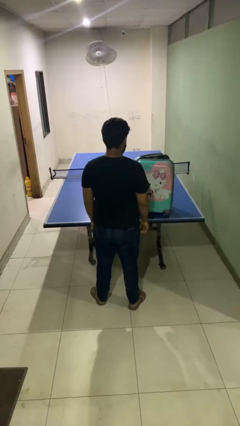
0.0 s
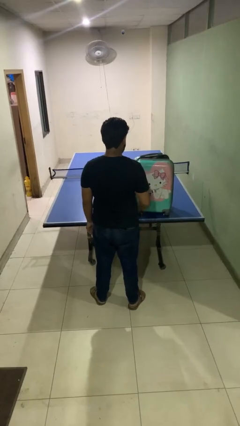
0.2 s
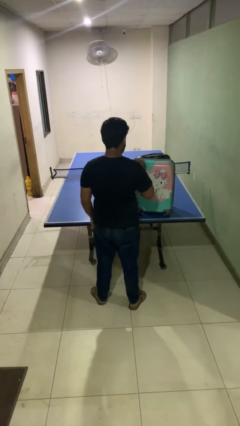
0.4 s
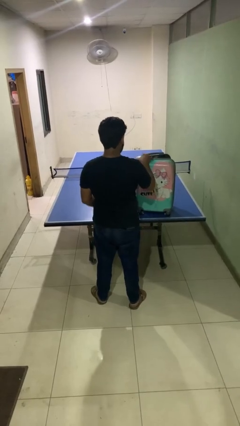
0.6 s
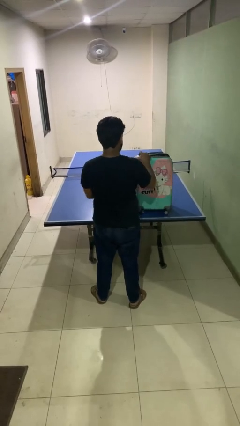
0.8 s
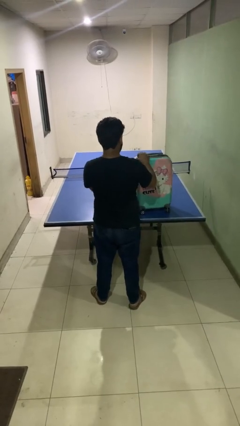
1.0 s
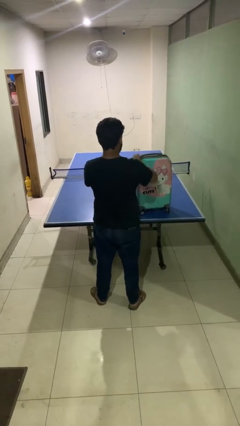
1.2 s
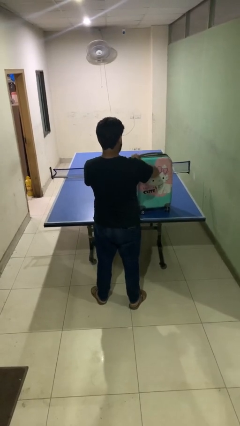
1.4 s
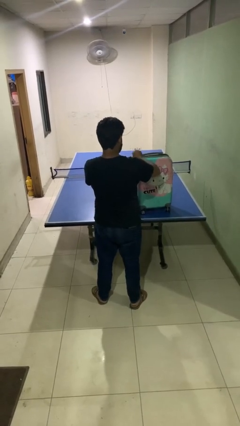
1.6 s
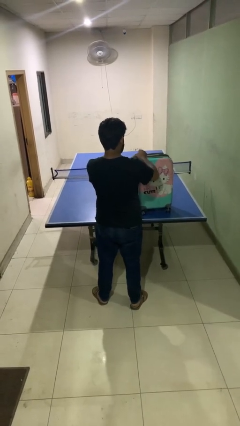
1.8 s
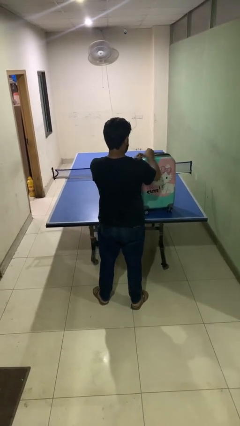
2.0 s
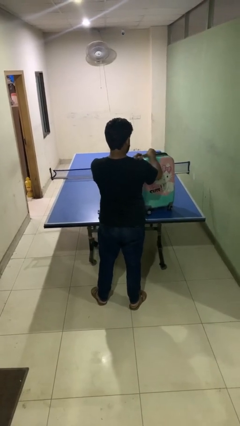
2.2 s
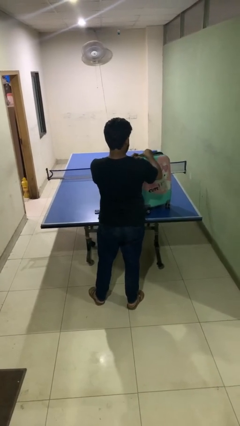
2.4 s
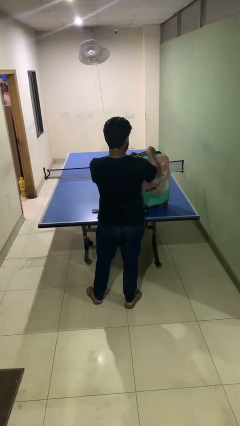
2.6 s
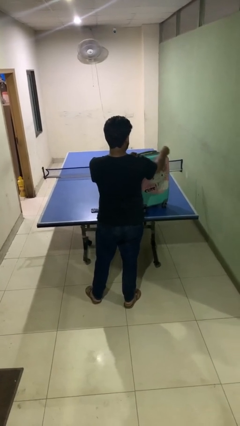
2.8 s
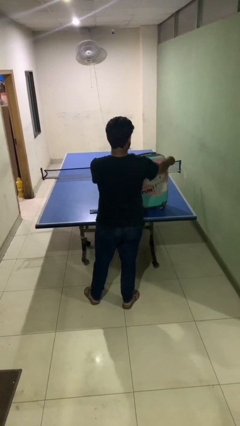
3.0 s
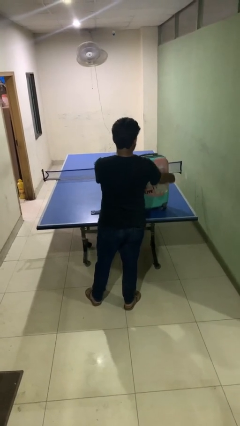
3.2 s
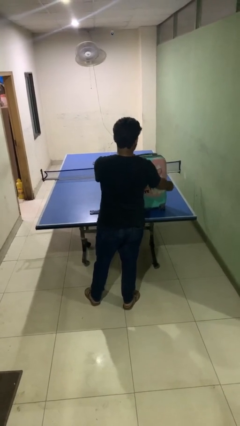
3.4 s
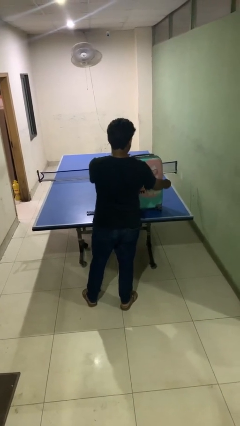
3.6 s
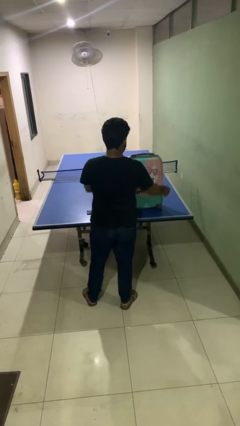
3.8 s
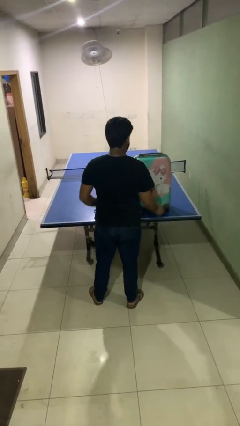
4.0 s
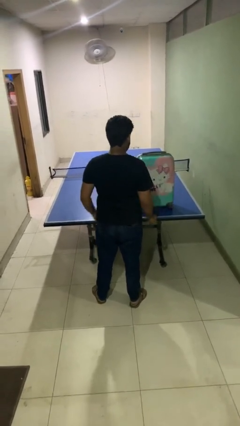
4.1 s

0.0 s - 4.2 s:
person closes suitcase

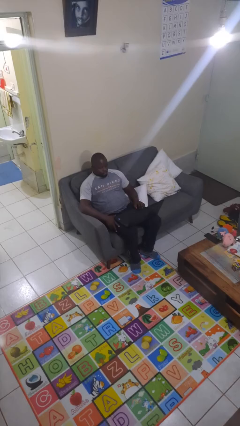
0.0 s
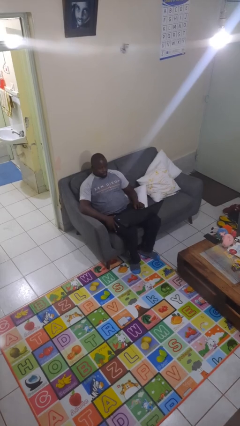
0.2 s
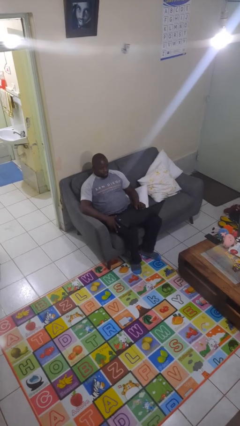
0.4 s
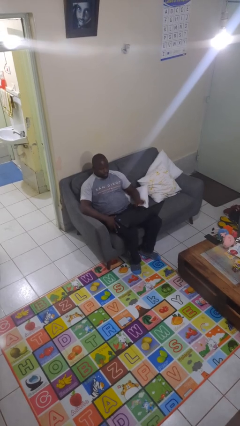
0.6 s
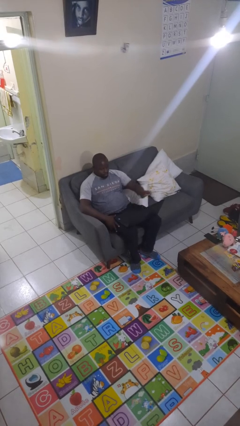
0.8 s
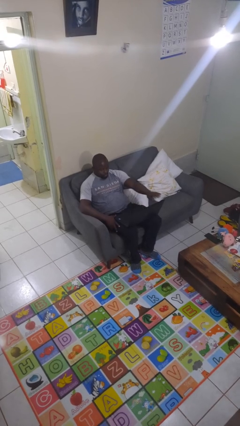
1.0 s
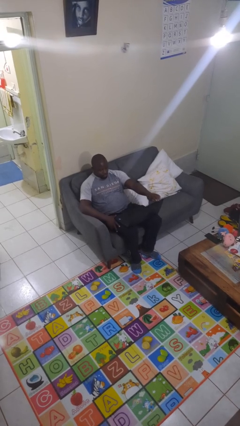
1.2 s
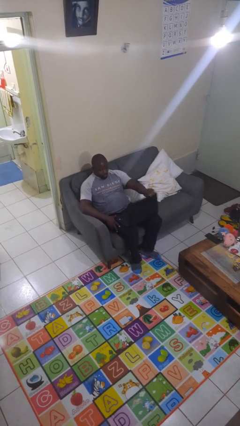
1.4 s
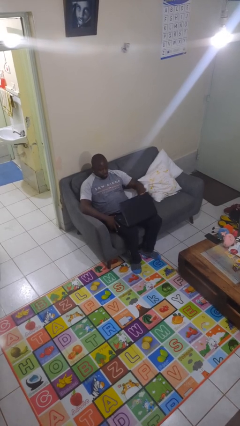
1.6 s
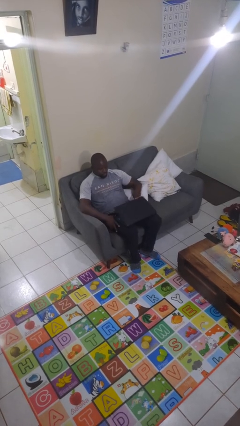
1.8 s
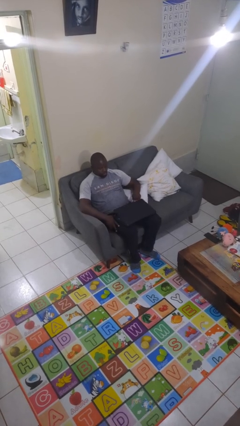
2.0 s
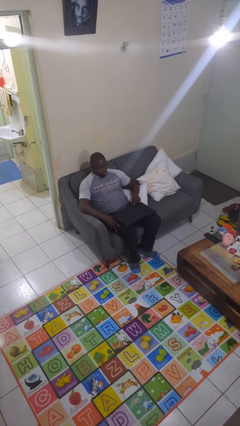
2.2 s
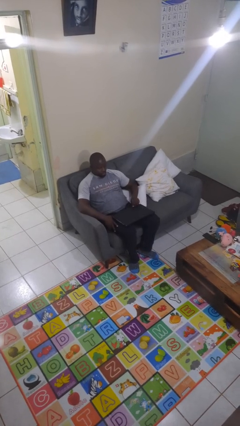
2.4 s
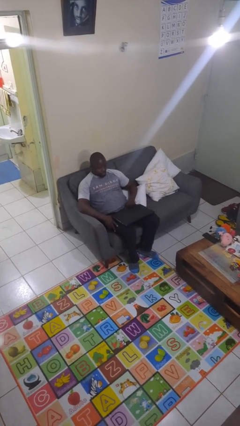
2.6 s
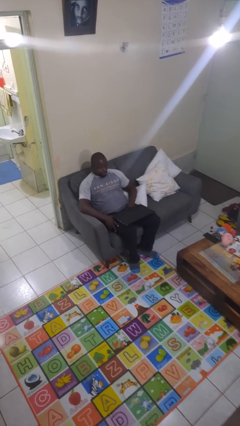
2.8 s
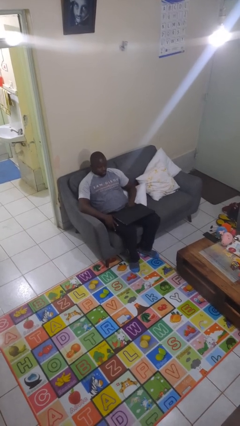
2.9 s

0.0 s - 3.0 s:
person closes laptop

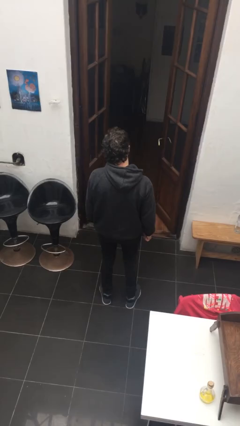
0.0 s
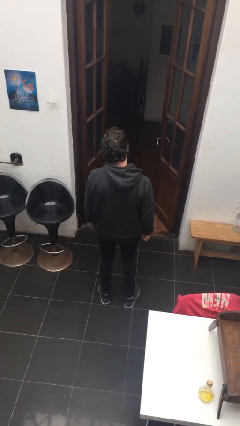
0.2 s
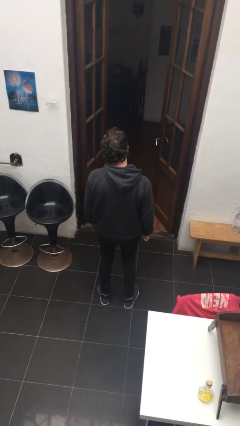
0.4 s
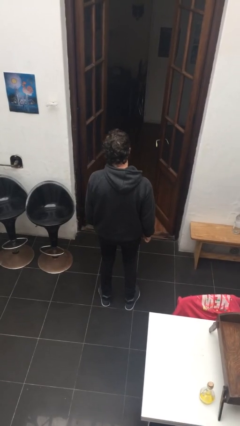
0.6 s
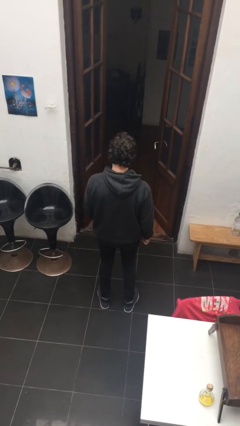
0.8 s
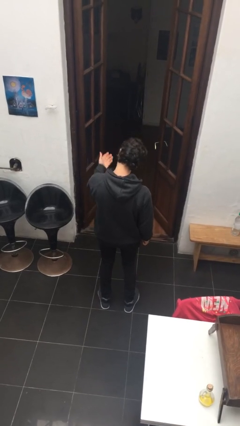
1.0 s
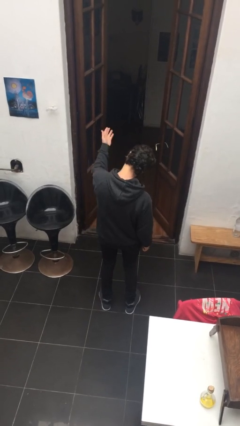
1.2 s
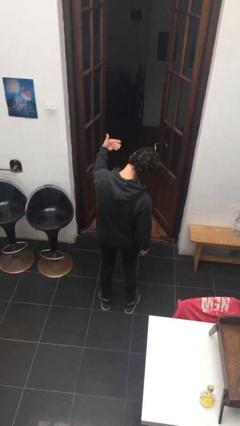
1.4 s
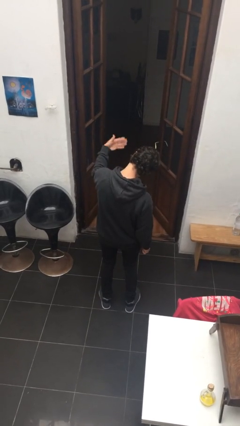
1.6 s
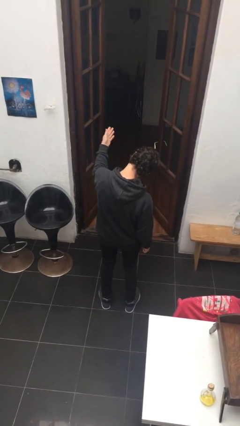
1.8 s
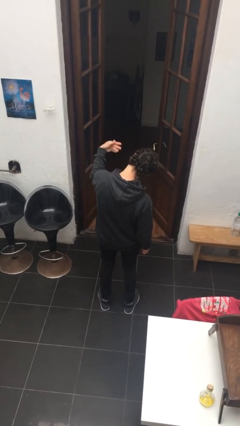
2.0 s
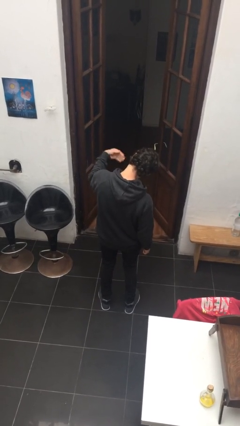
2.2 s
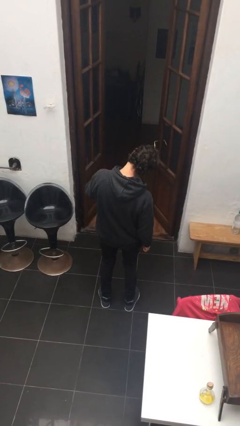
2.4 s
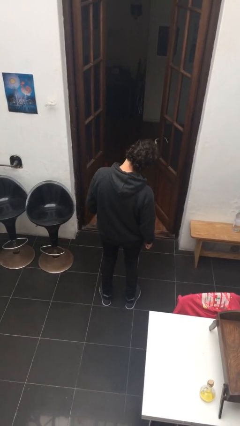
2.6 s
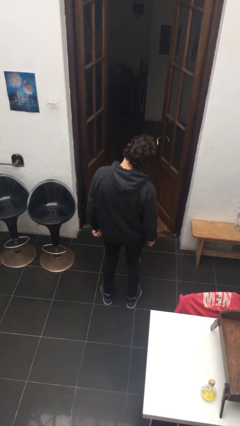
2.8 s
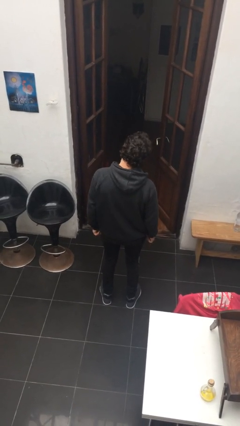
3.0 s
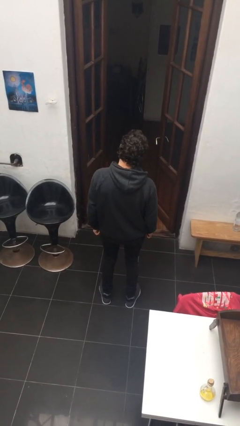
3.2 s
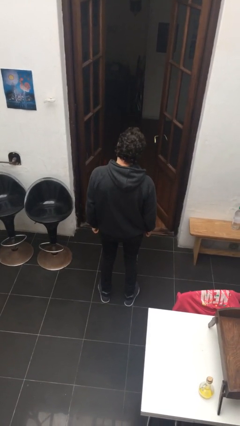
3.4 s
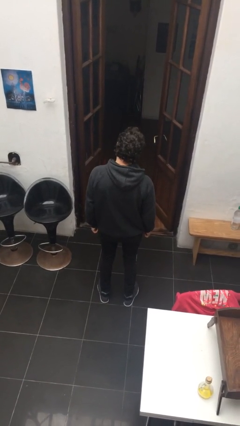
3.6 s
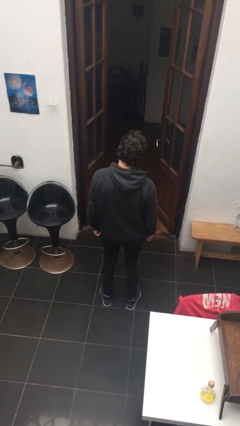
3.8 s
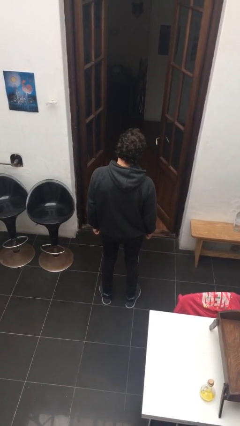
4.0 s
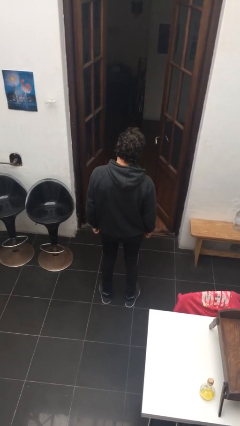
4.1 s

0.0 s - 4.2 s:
person gestures come here

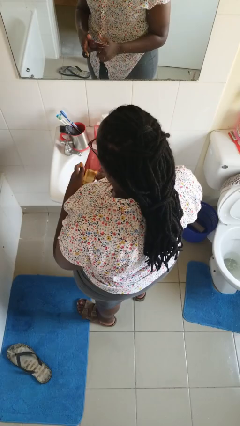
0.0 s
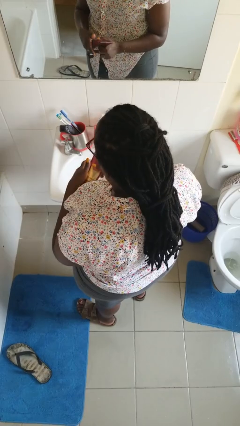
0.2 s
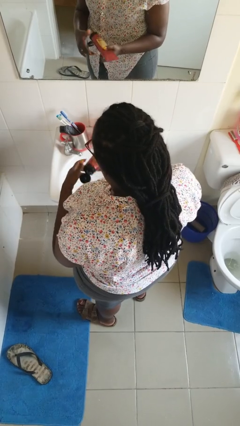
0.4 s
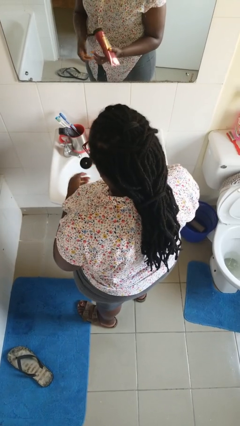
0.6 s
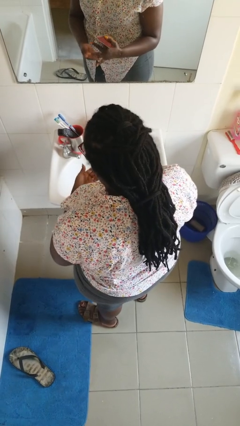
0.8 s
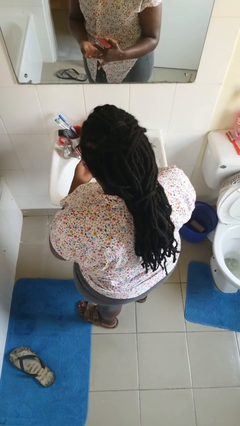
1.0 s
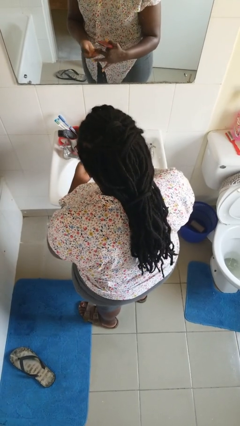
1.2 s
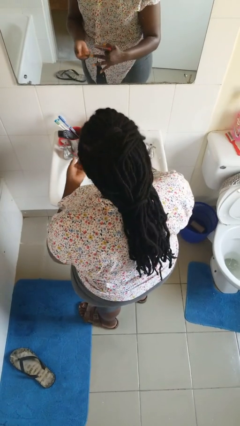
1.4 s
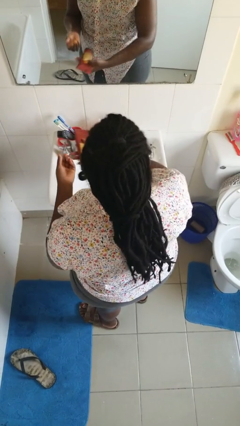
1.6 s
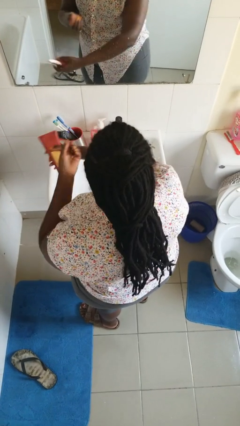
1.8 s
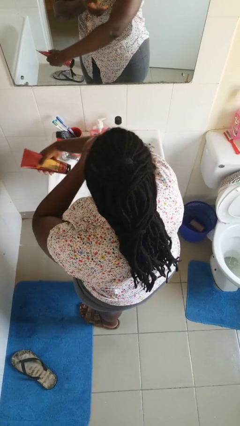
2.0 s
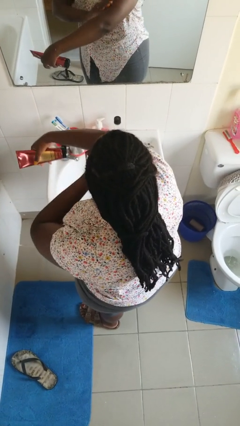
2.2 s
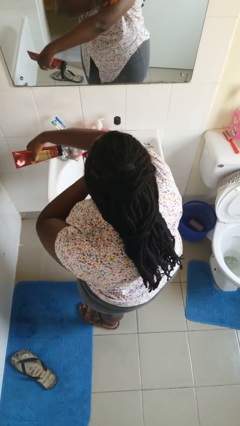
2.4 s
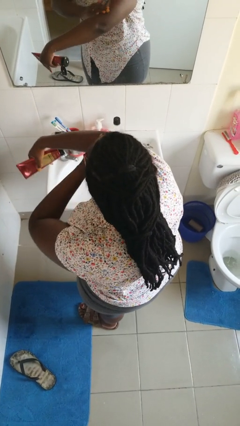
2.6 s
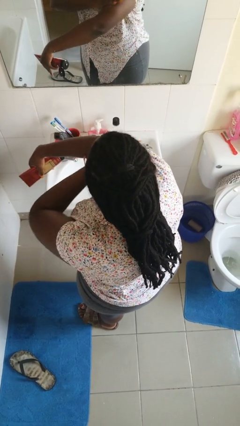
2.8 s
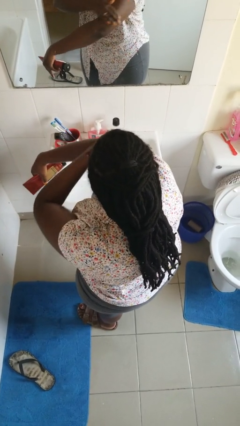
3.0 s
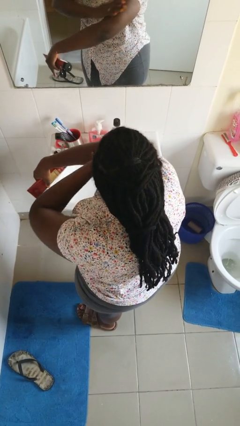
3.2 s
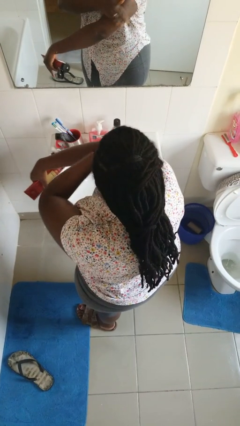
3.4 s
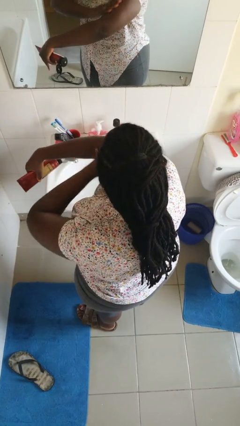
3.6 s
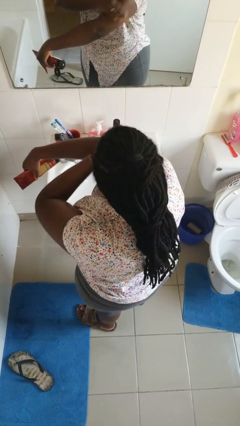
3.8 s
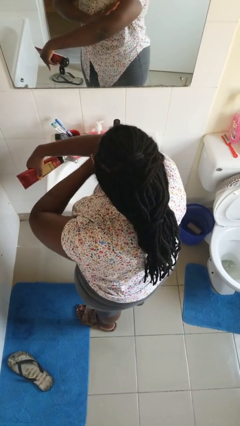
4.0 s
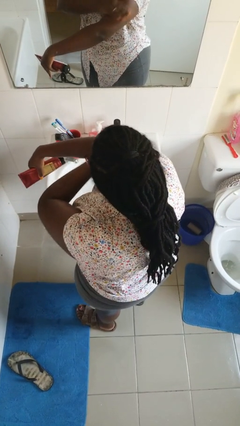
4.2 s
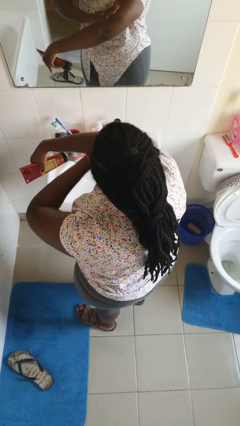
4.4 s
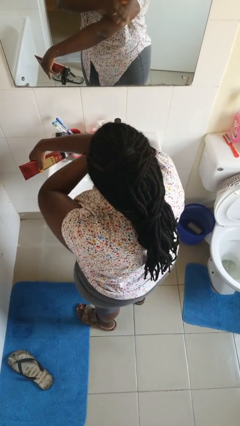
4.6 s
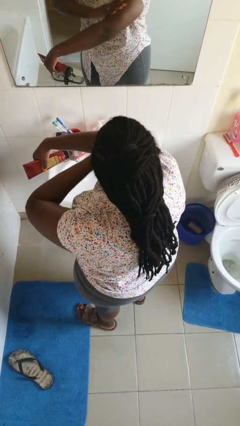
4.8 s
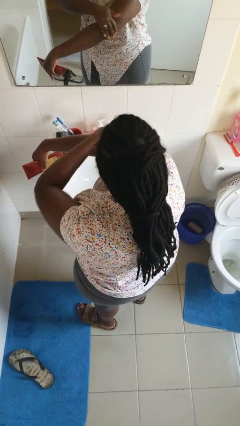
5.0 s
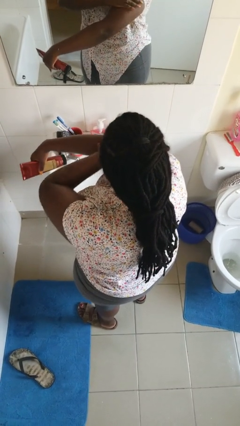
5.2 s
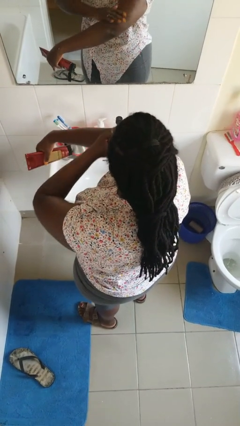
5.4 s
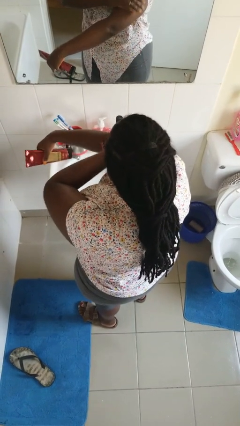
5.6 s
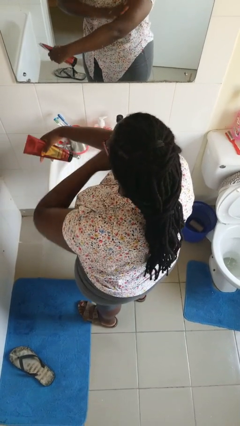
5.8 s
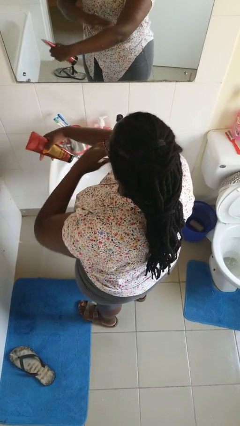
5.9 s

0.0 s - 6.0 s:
person applies sunscreen
